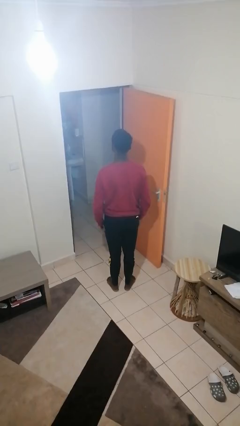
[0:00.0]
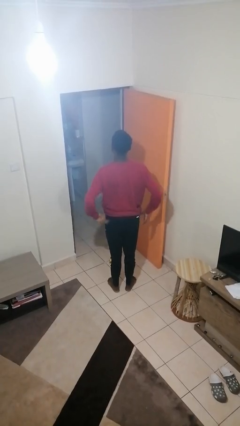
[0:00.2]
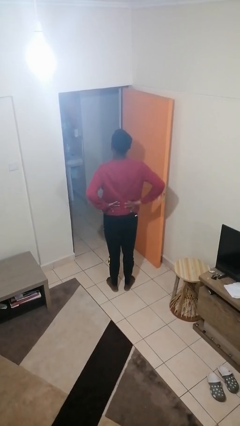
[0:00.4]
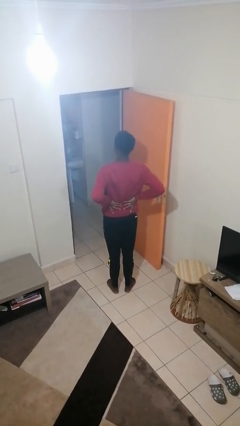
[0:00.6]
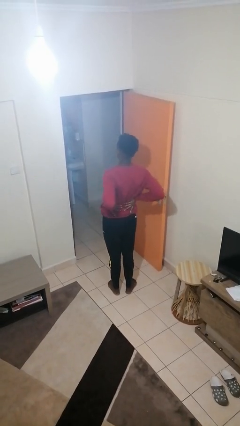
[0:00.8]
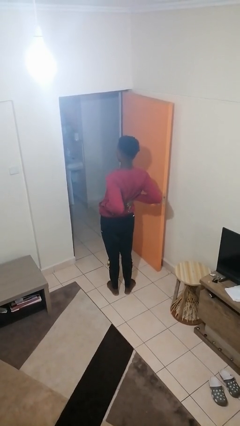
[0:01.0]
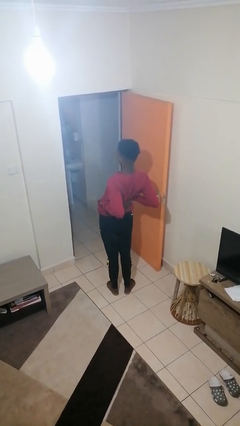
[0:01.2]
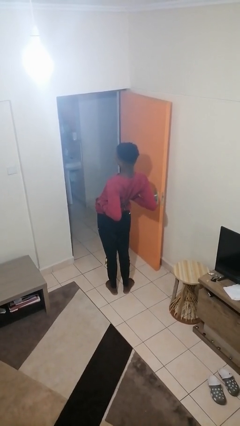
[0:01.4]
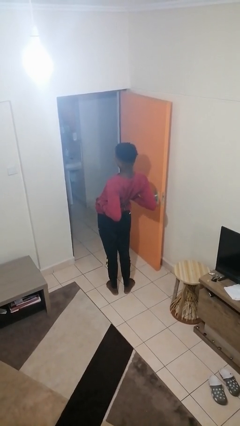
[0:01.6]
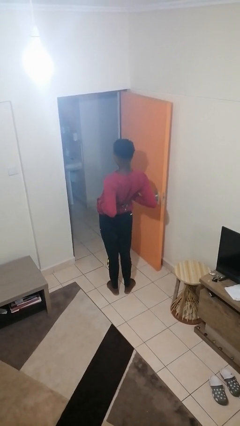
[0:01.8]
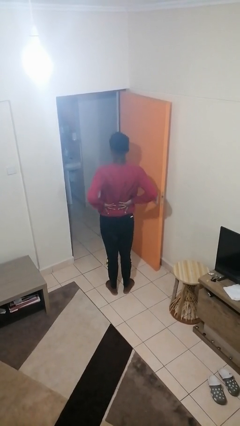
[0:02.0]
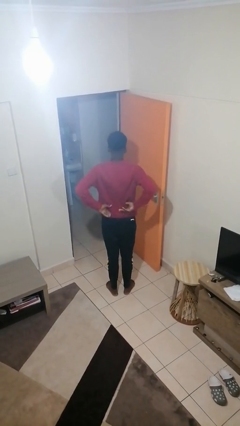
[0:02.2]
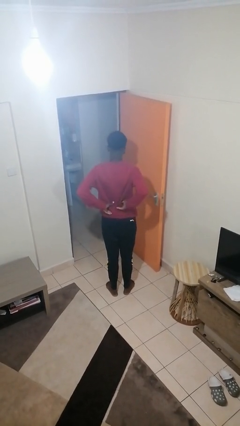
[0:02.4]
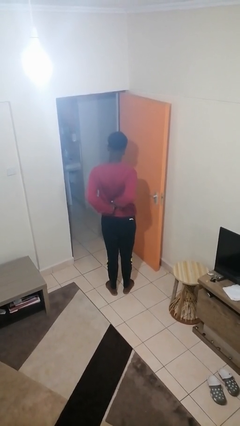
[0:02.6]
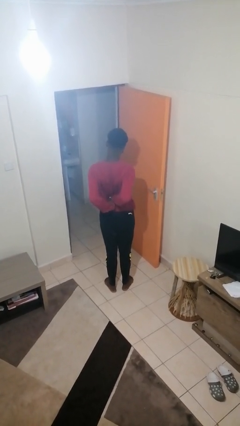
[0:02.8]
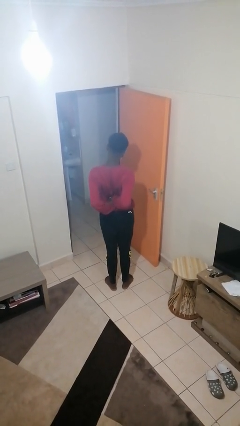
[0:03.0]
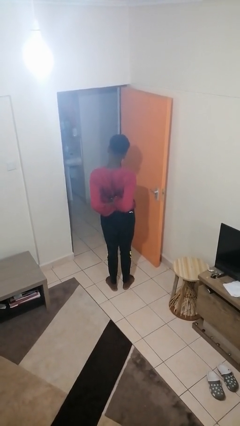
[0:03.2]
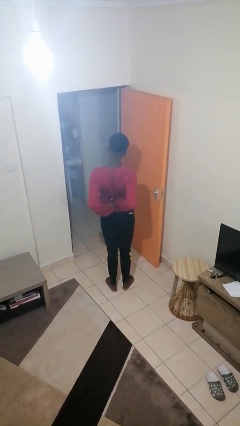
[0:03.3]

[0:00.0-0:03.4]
person stretches back

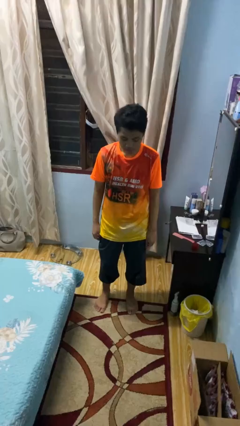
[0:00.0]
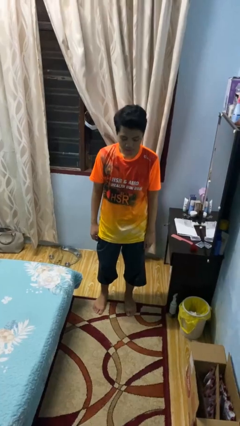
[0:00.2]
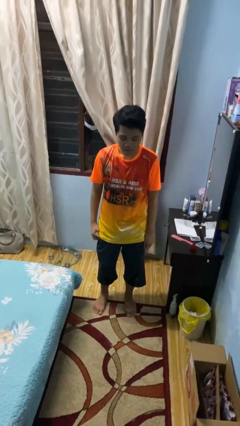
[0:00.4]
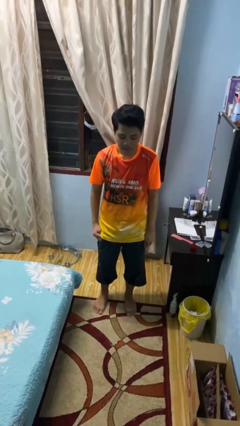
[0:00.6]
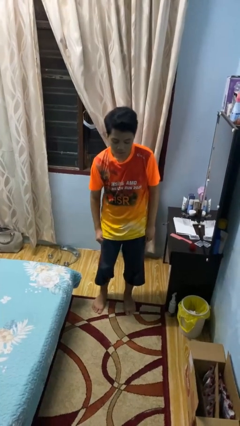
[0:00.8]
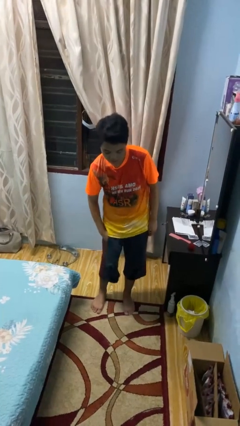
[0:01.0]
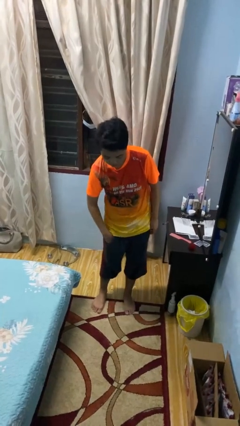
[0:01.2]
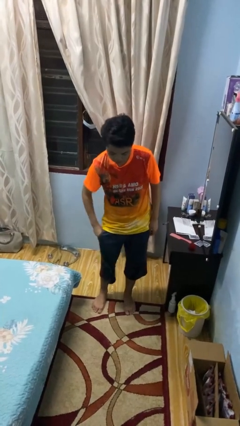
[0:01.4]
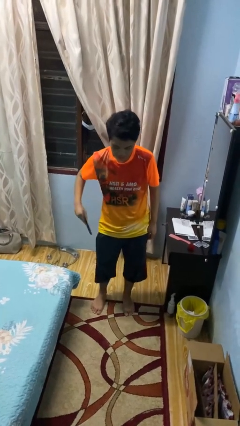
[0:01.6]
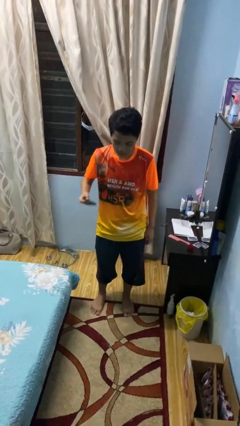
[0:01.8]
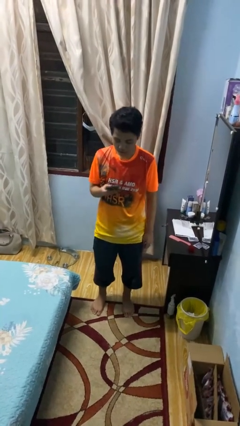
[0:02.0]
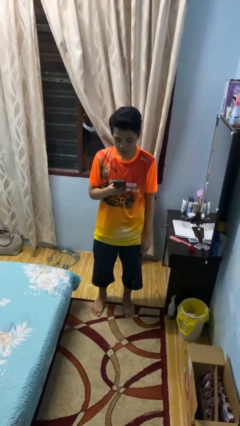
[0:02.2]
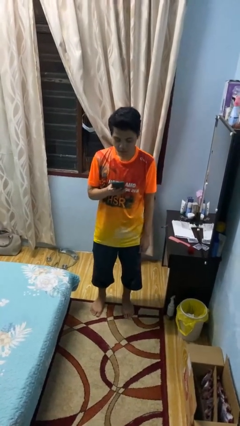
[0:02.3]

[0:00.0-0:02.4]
person takes phone from pocket

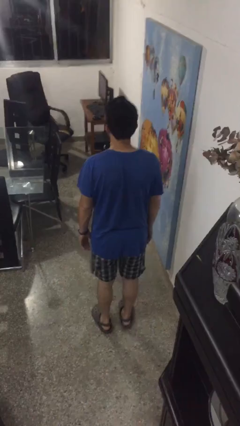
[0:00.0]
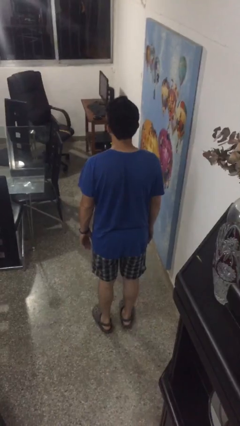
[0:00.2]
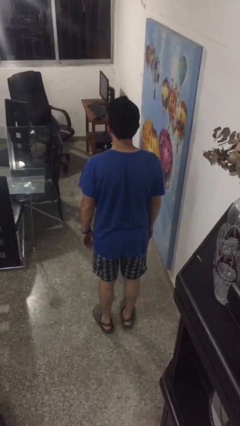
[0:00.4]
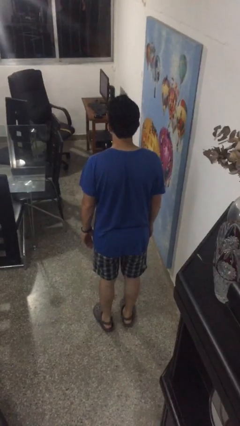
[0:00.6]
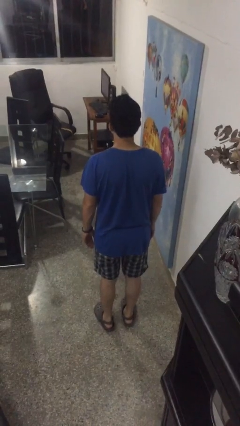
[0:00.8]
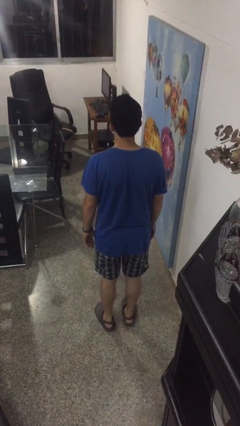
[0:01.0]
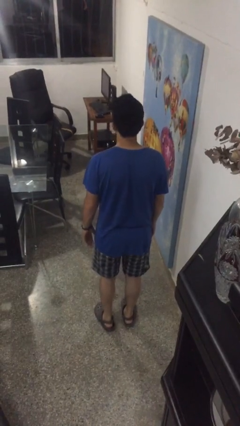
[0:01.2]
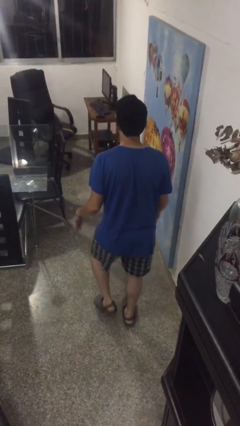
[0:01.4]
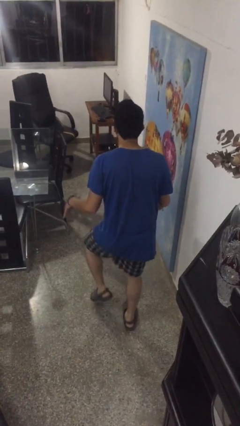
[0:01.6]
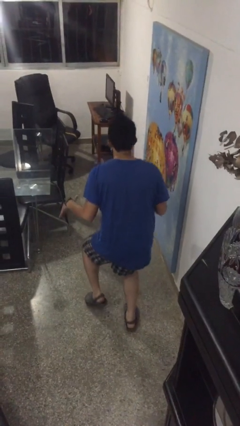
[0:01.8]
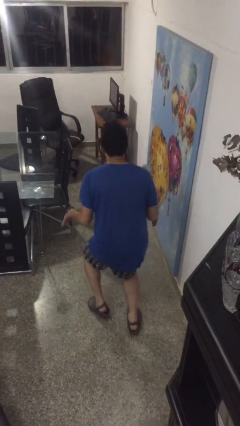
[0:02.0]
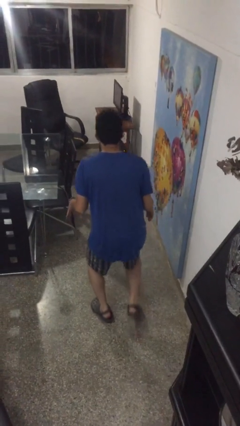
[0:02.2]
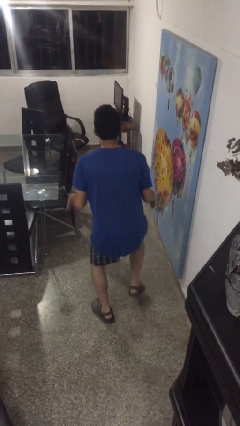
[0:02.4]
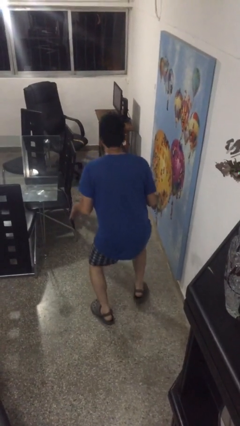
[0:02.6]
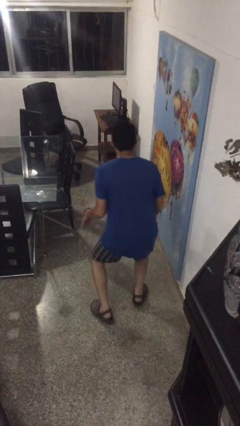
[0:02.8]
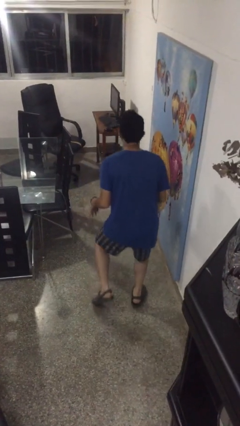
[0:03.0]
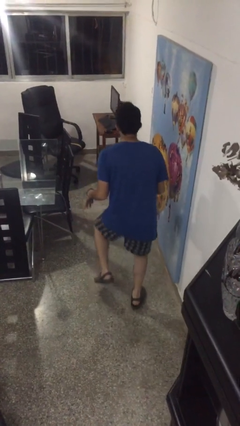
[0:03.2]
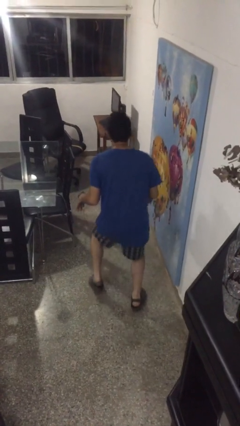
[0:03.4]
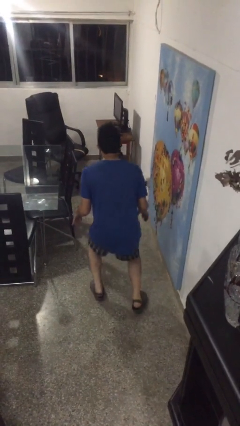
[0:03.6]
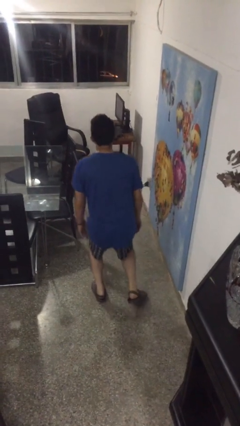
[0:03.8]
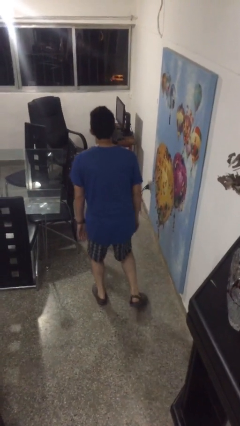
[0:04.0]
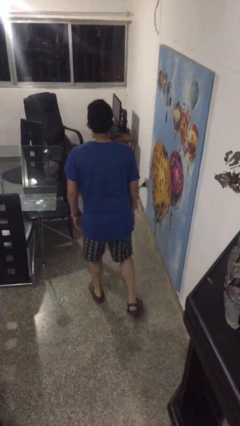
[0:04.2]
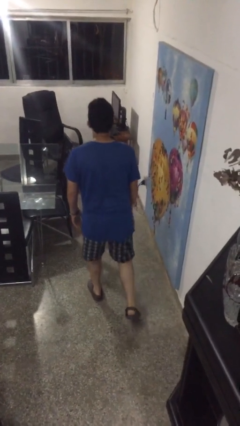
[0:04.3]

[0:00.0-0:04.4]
person walks tiptoe

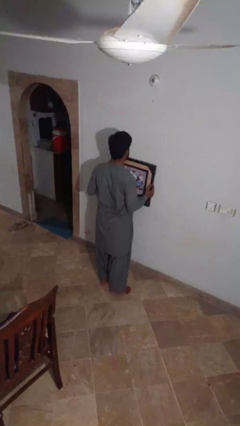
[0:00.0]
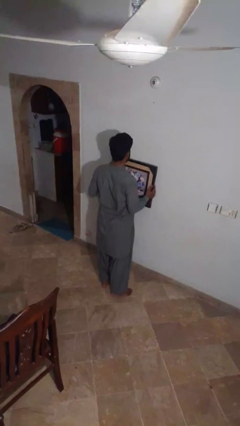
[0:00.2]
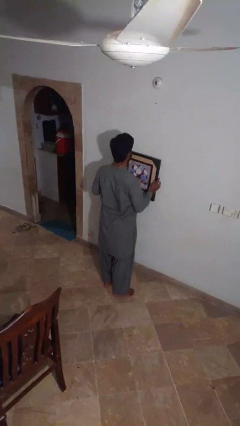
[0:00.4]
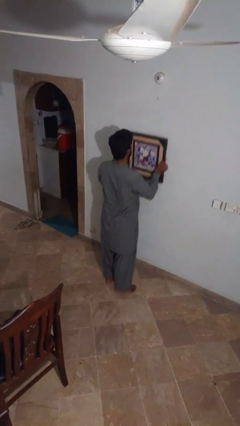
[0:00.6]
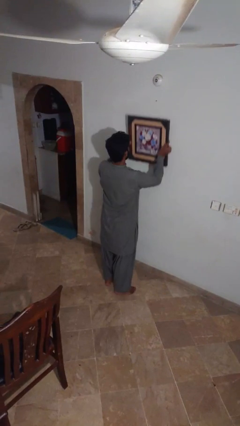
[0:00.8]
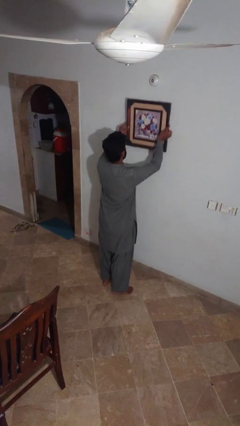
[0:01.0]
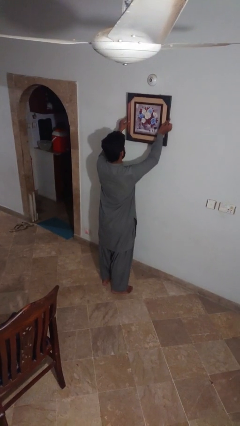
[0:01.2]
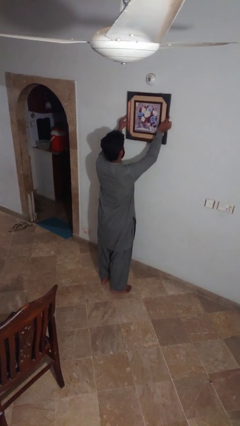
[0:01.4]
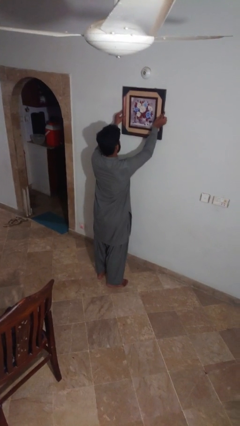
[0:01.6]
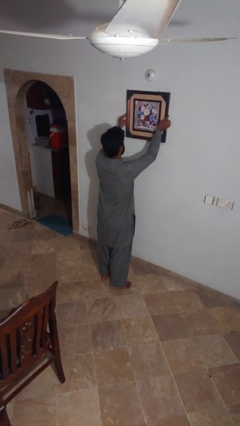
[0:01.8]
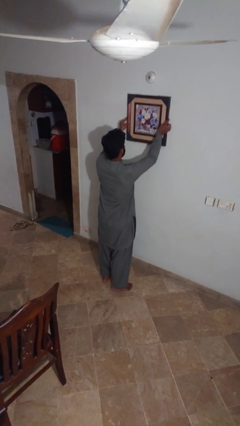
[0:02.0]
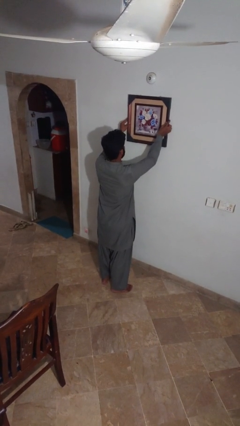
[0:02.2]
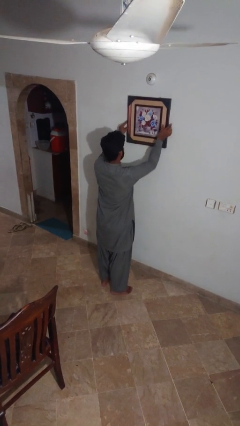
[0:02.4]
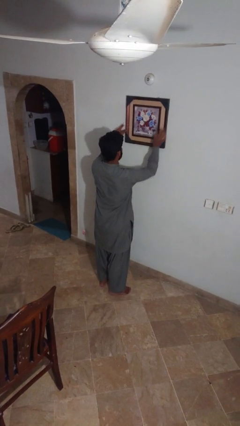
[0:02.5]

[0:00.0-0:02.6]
person puts up picture frame

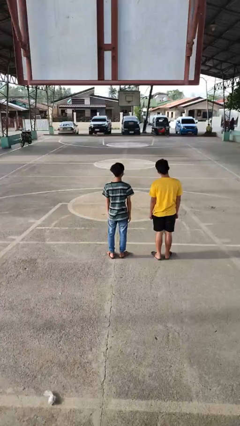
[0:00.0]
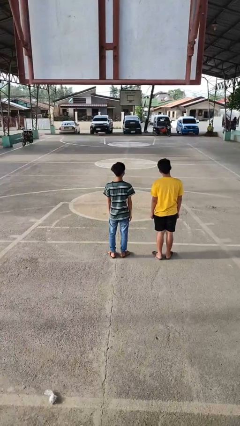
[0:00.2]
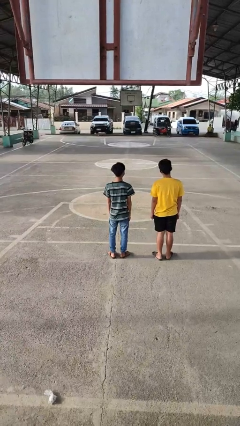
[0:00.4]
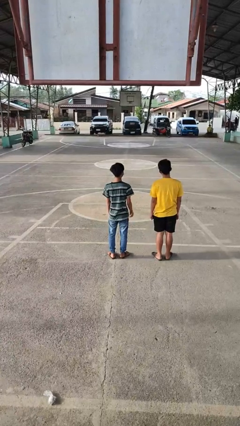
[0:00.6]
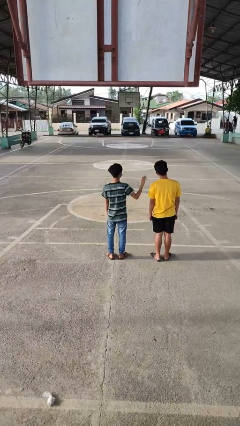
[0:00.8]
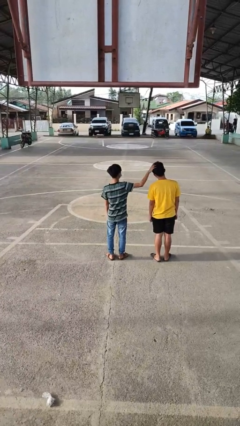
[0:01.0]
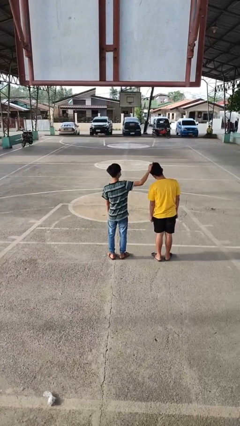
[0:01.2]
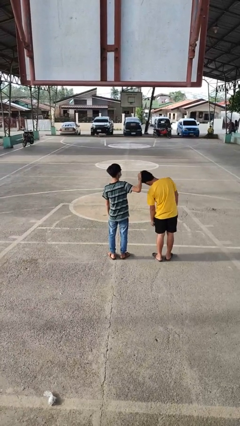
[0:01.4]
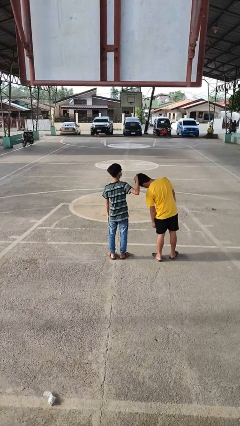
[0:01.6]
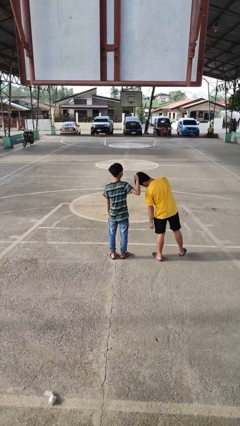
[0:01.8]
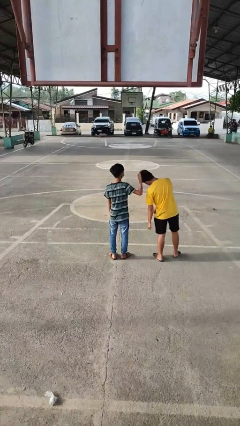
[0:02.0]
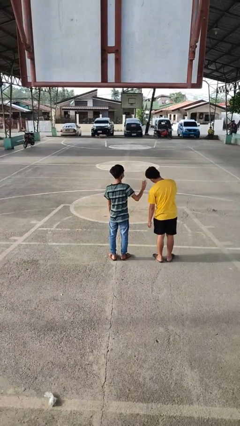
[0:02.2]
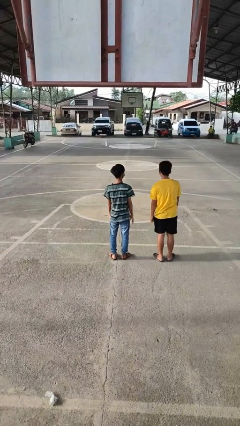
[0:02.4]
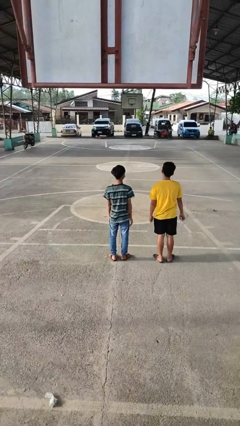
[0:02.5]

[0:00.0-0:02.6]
person grabs person by hair

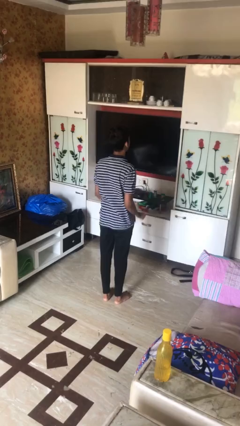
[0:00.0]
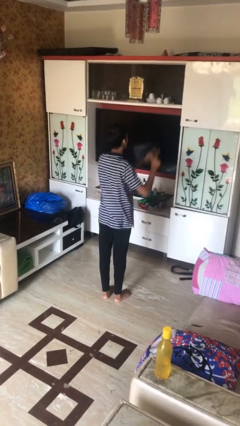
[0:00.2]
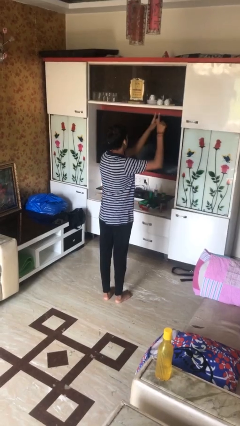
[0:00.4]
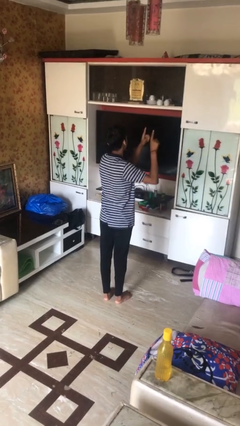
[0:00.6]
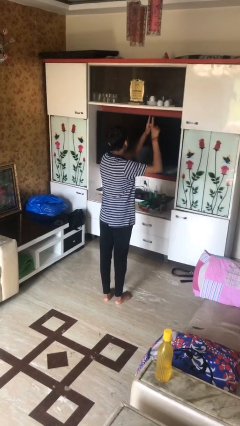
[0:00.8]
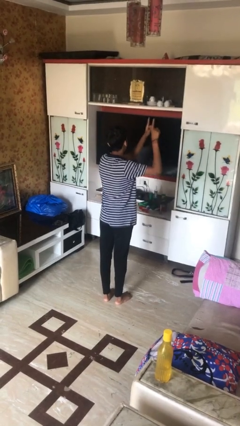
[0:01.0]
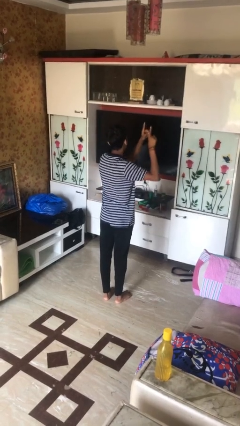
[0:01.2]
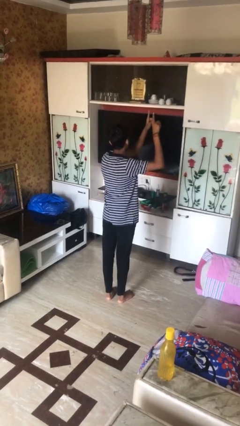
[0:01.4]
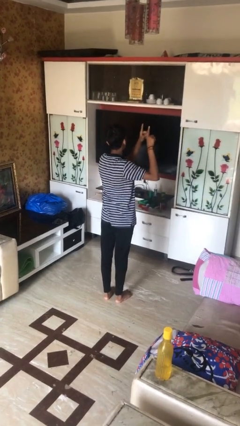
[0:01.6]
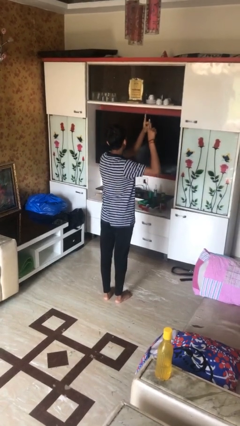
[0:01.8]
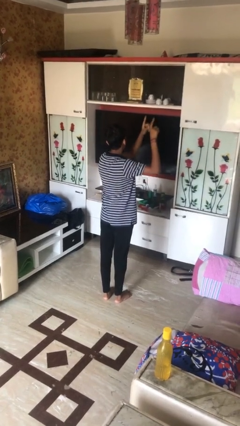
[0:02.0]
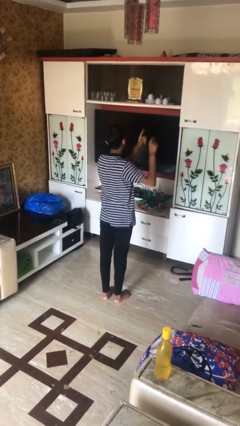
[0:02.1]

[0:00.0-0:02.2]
person dances in place
